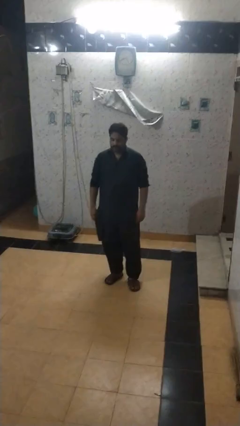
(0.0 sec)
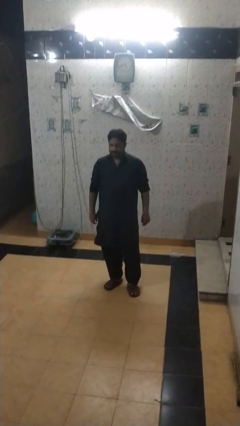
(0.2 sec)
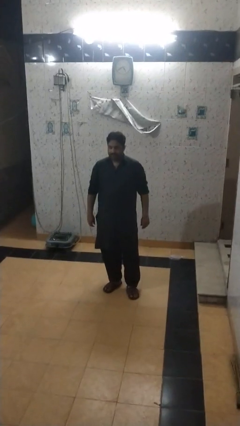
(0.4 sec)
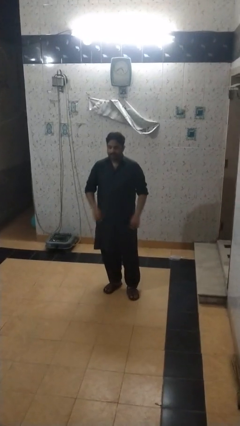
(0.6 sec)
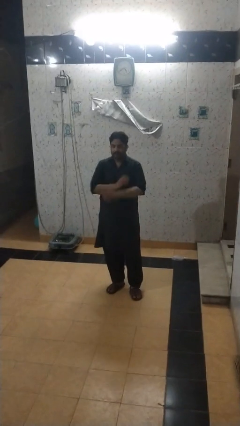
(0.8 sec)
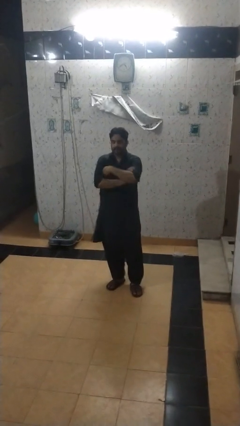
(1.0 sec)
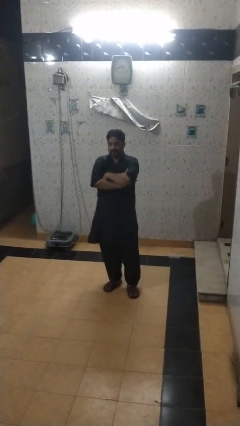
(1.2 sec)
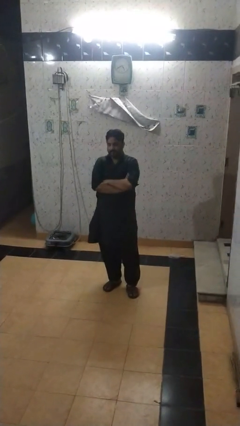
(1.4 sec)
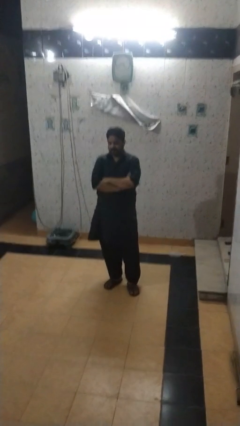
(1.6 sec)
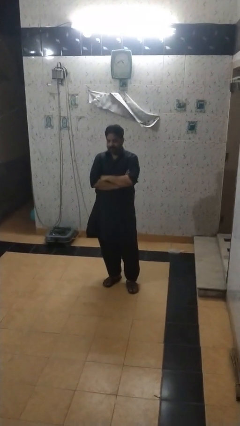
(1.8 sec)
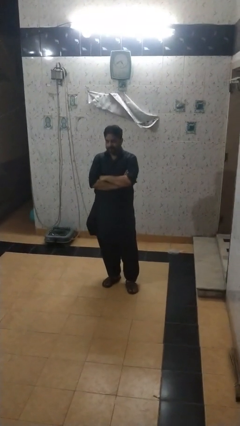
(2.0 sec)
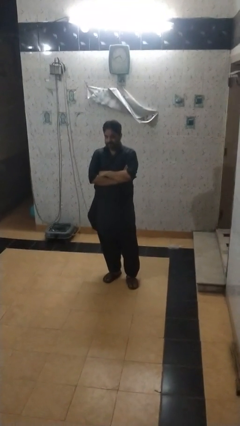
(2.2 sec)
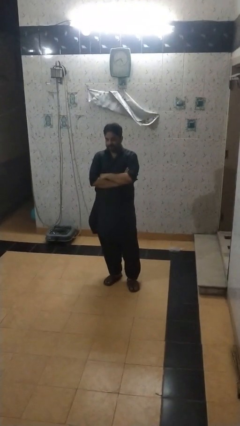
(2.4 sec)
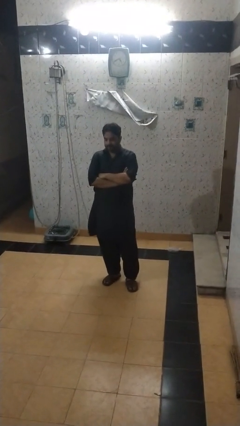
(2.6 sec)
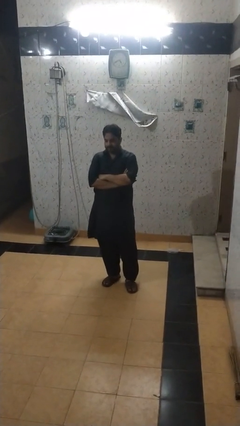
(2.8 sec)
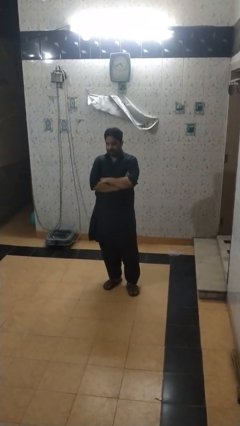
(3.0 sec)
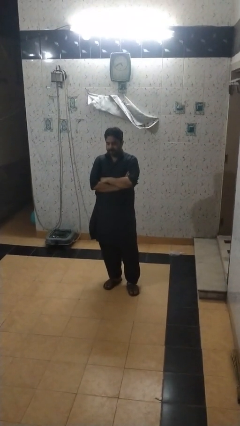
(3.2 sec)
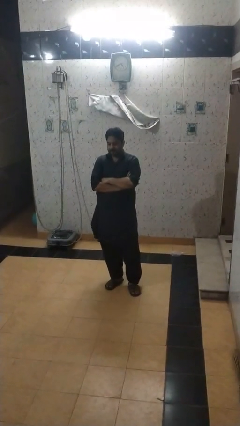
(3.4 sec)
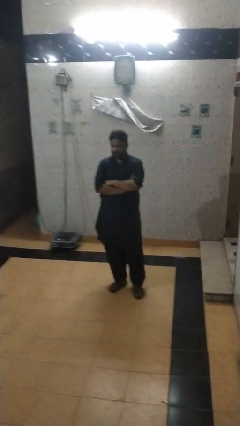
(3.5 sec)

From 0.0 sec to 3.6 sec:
person crosses arms

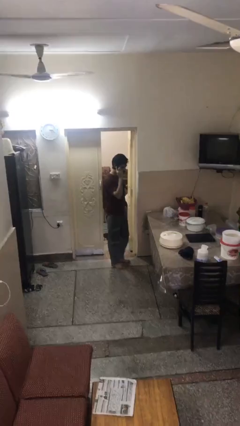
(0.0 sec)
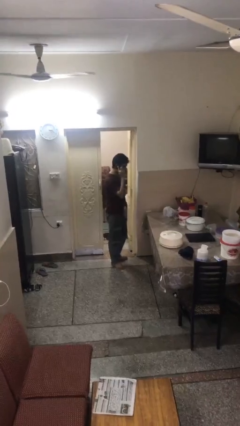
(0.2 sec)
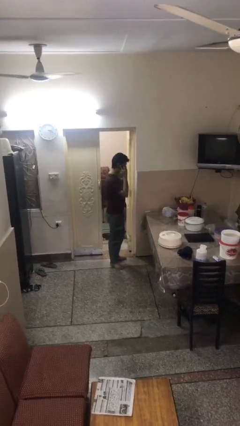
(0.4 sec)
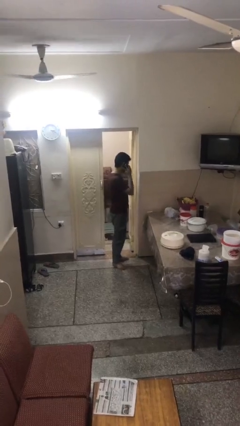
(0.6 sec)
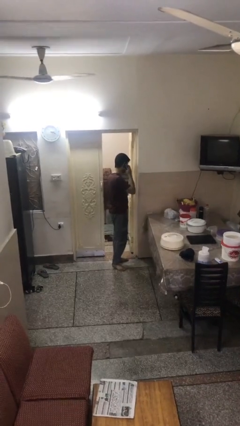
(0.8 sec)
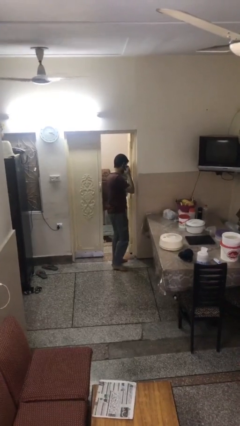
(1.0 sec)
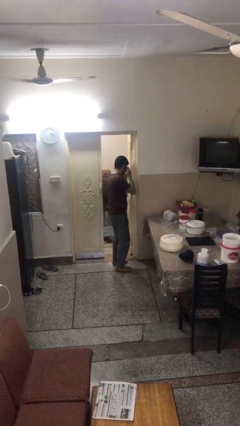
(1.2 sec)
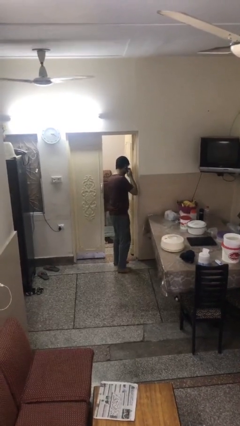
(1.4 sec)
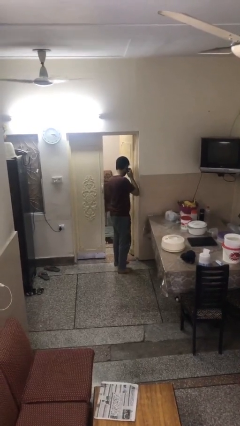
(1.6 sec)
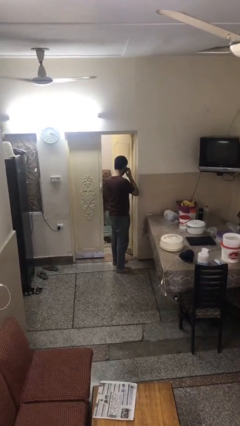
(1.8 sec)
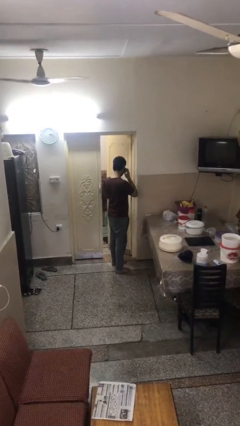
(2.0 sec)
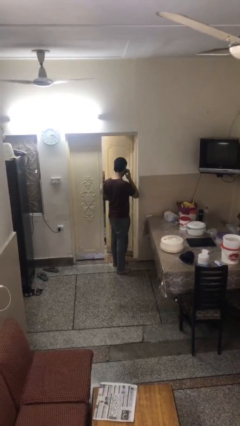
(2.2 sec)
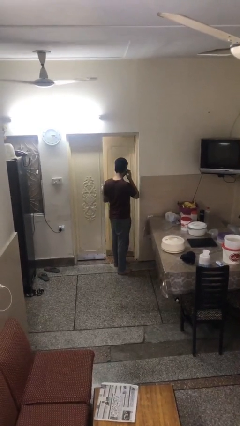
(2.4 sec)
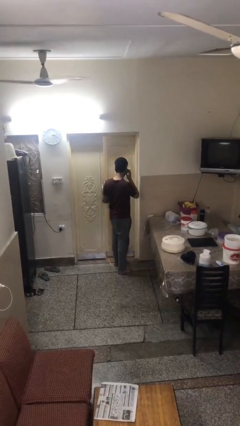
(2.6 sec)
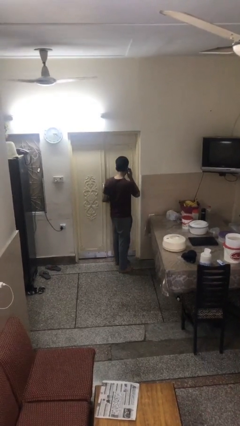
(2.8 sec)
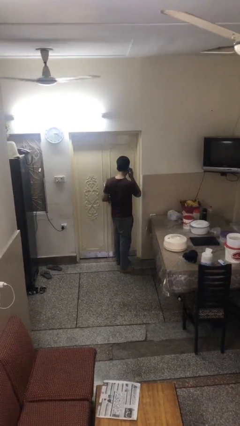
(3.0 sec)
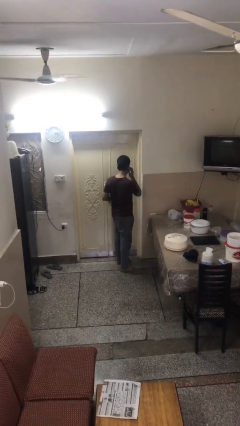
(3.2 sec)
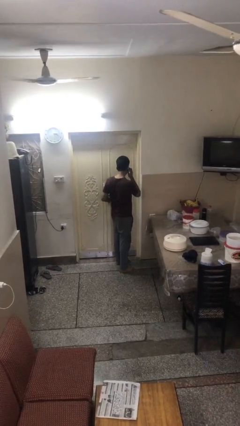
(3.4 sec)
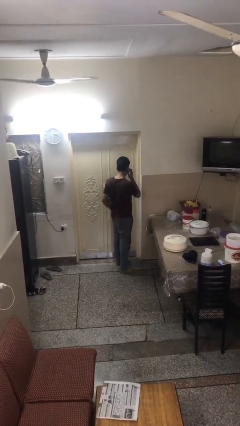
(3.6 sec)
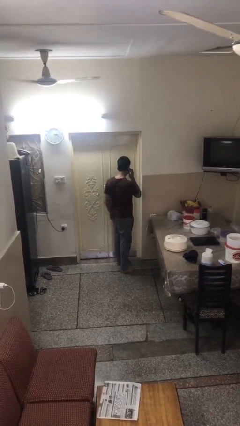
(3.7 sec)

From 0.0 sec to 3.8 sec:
person closes facility door

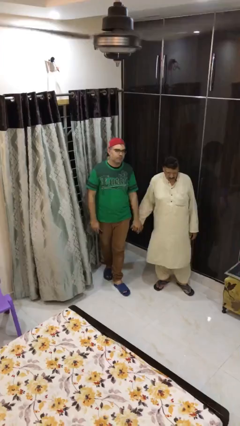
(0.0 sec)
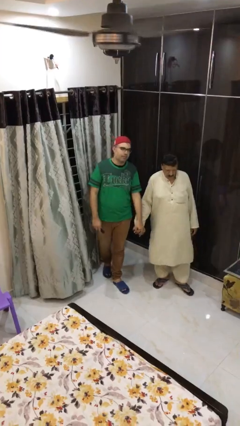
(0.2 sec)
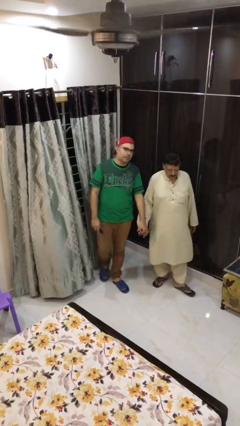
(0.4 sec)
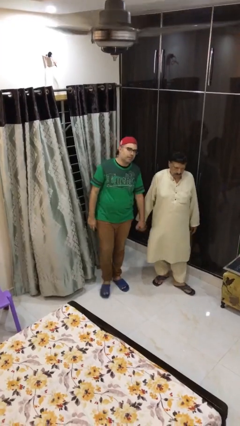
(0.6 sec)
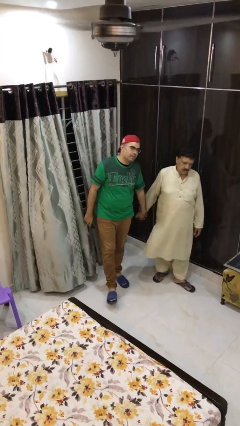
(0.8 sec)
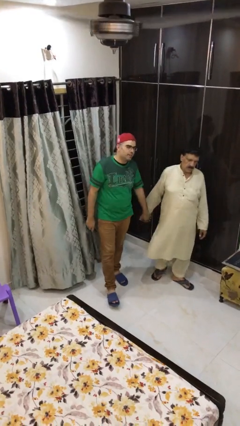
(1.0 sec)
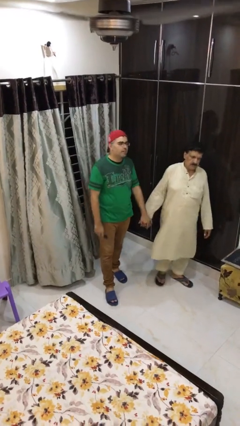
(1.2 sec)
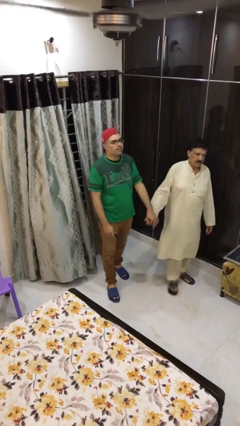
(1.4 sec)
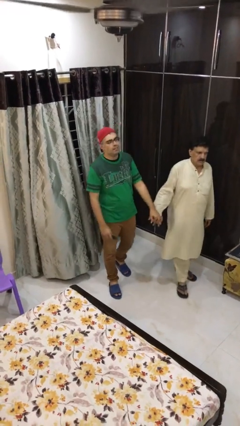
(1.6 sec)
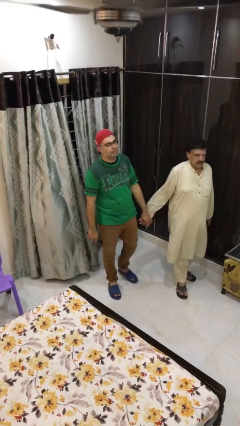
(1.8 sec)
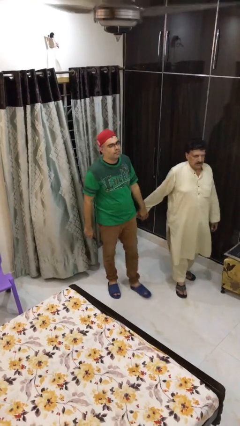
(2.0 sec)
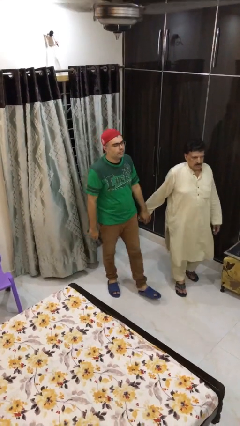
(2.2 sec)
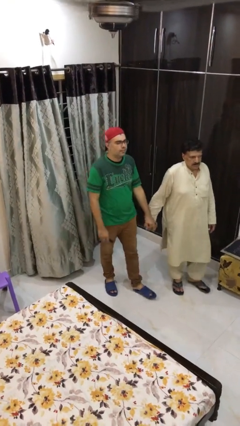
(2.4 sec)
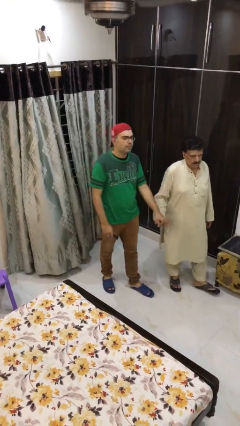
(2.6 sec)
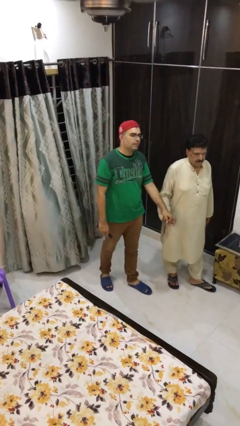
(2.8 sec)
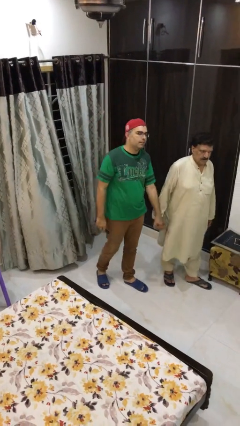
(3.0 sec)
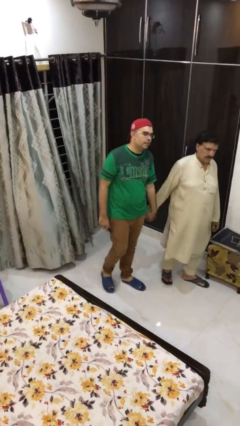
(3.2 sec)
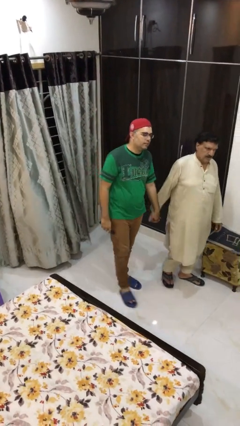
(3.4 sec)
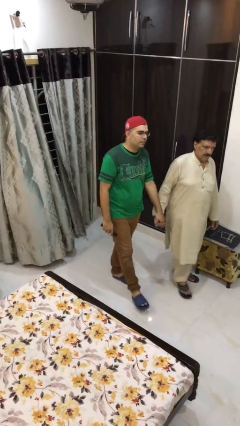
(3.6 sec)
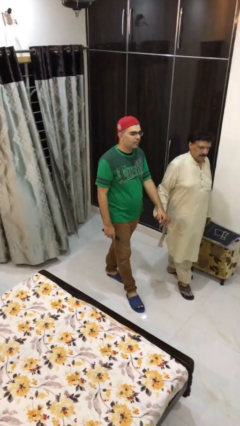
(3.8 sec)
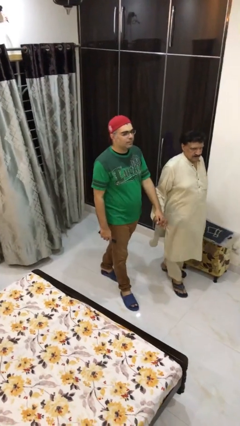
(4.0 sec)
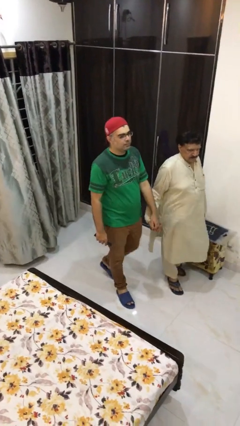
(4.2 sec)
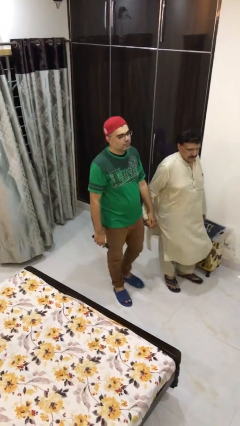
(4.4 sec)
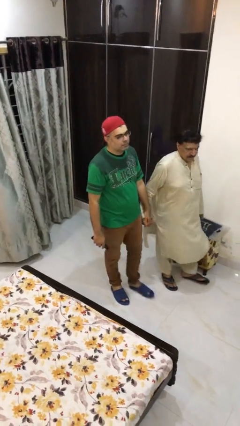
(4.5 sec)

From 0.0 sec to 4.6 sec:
person holds hand

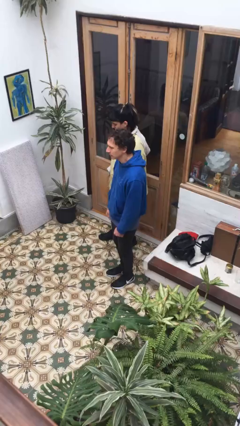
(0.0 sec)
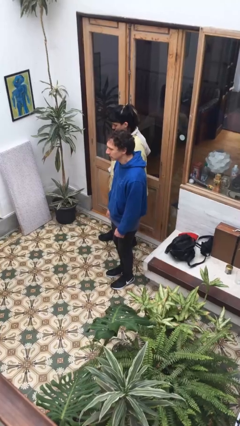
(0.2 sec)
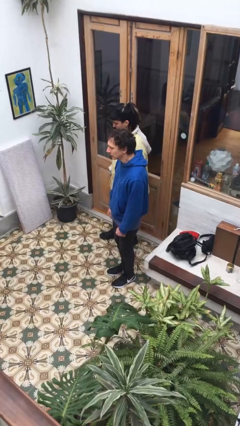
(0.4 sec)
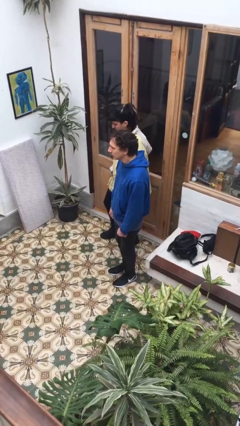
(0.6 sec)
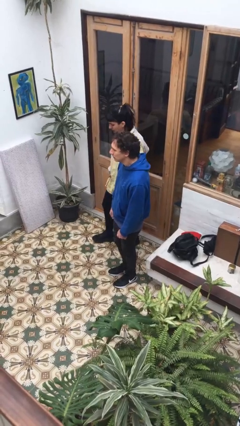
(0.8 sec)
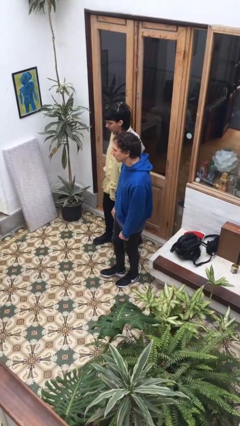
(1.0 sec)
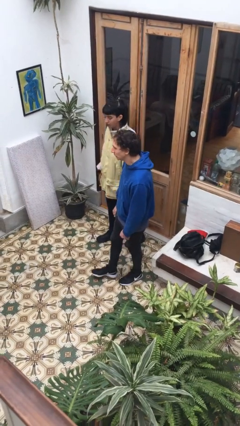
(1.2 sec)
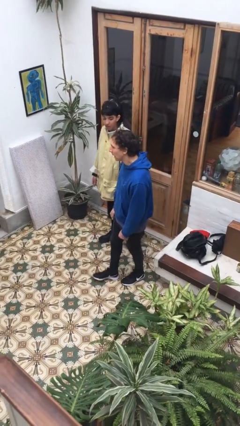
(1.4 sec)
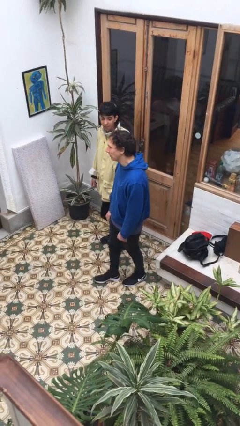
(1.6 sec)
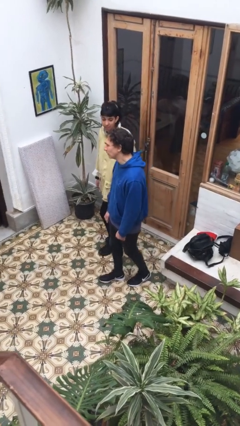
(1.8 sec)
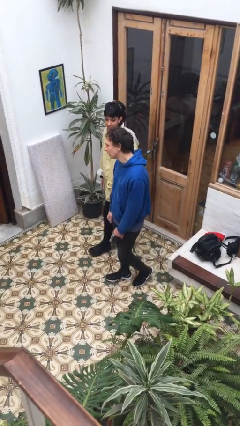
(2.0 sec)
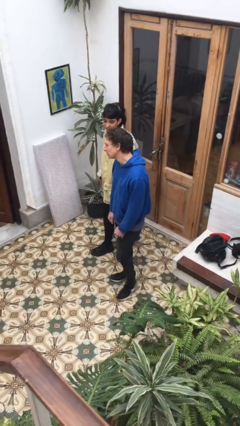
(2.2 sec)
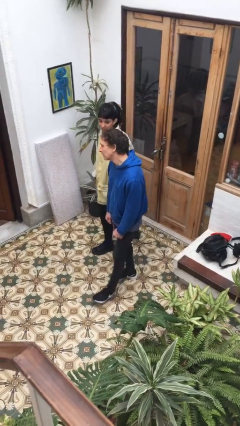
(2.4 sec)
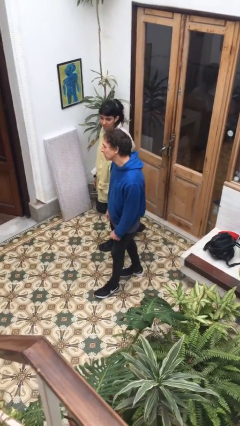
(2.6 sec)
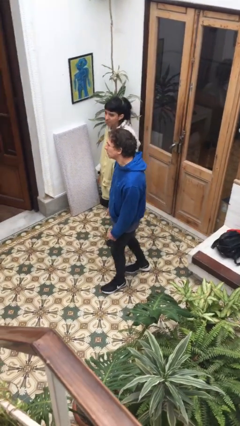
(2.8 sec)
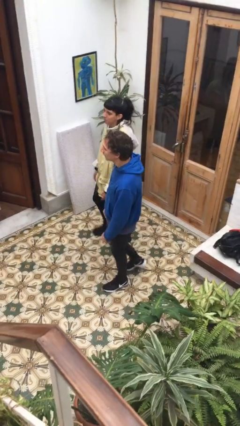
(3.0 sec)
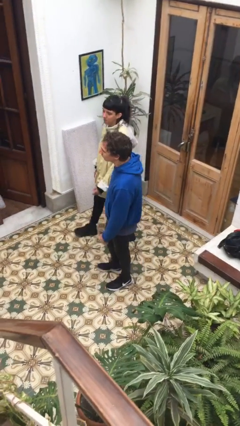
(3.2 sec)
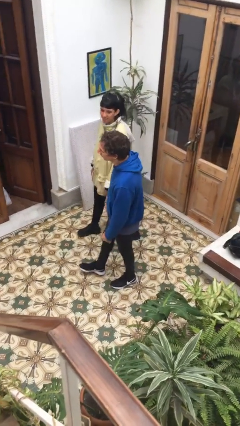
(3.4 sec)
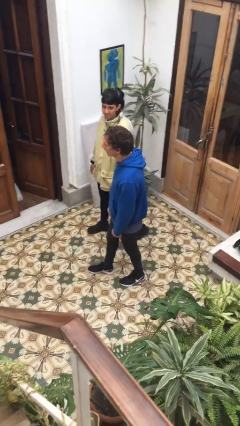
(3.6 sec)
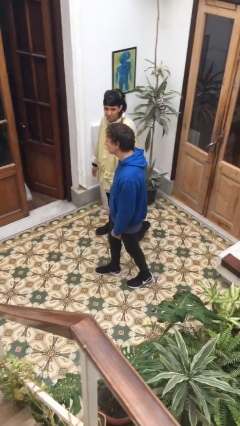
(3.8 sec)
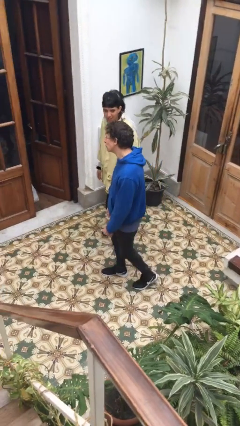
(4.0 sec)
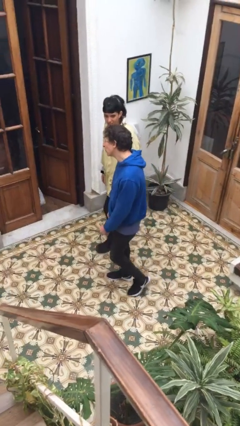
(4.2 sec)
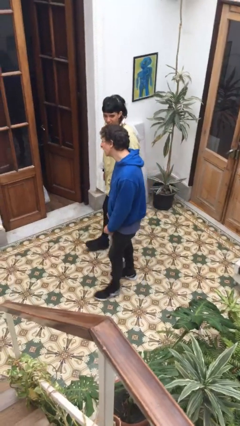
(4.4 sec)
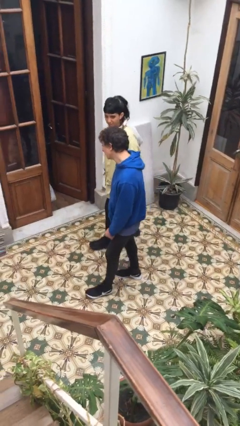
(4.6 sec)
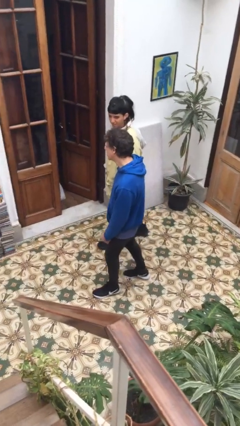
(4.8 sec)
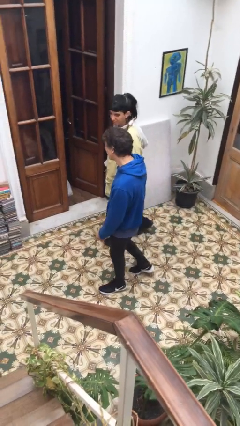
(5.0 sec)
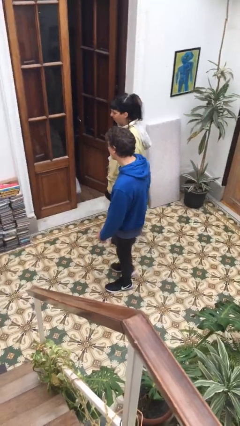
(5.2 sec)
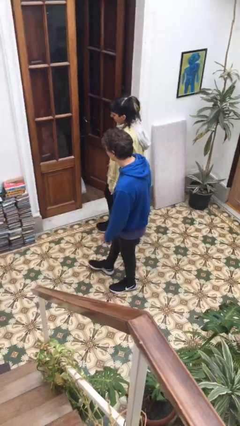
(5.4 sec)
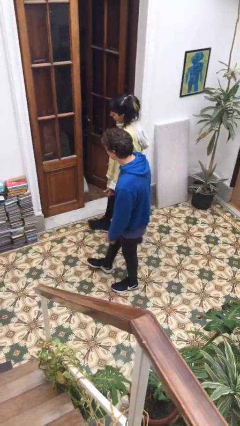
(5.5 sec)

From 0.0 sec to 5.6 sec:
person talks to person
